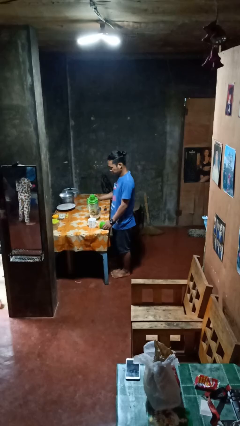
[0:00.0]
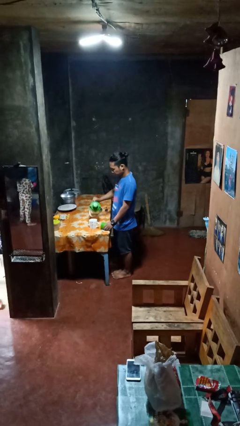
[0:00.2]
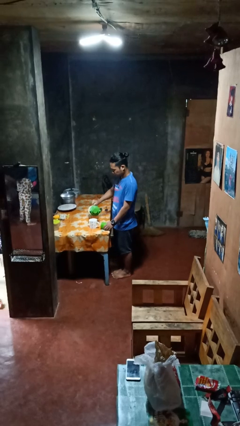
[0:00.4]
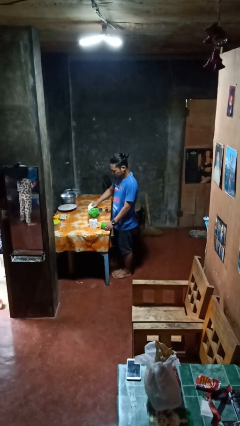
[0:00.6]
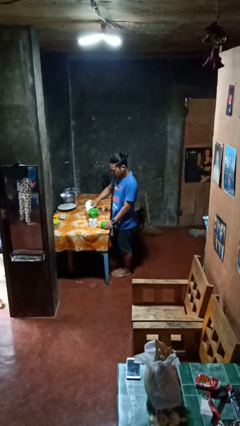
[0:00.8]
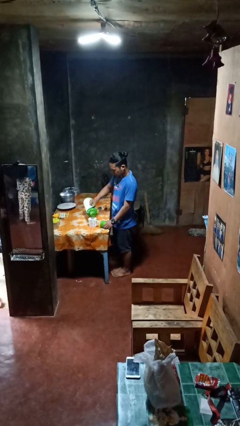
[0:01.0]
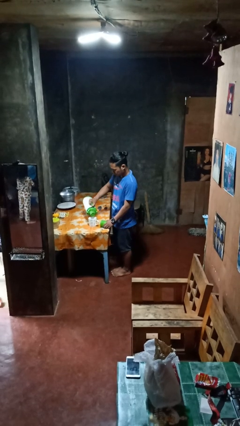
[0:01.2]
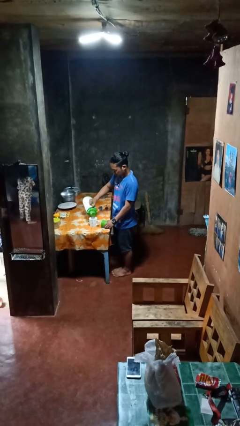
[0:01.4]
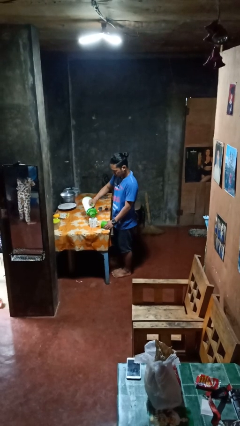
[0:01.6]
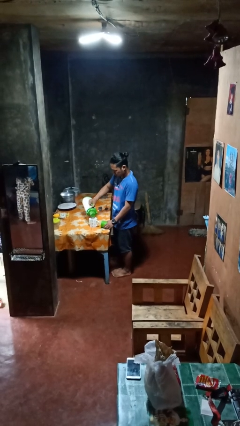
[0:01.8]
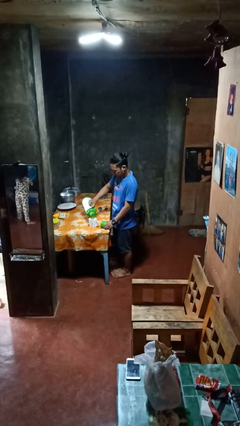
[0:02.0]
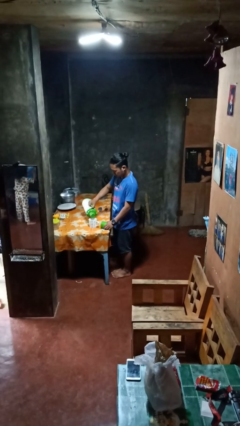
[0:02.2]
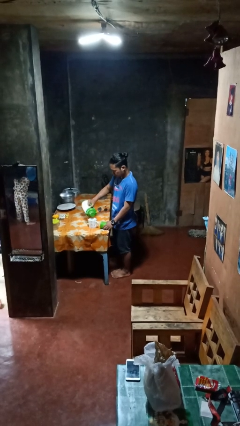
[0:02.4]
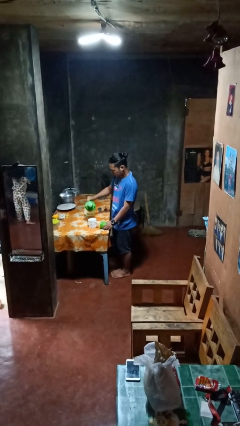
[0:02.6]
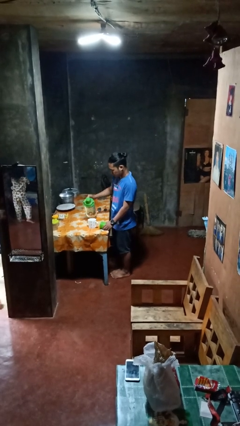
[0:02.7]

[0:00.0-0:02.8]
person pours coffee into mug

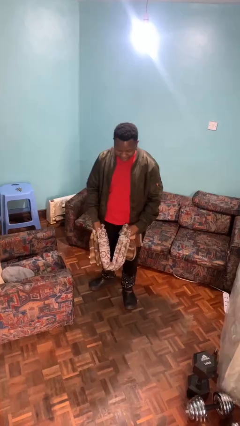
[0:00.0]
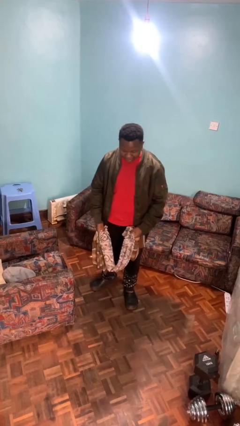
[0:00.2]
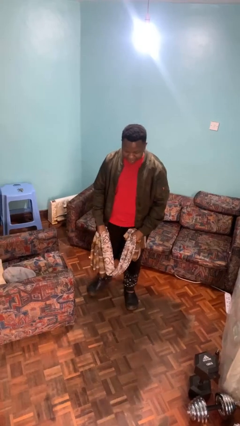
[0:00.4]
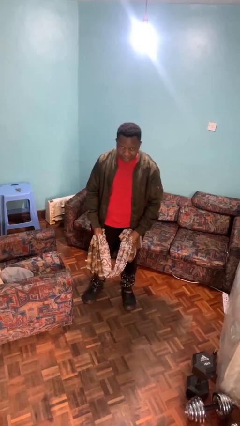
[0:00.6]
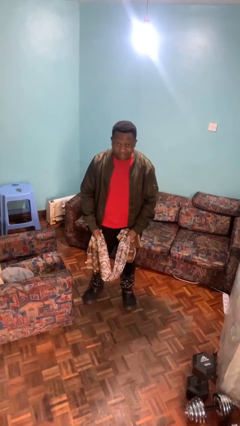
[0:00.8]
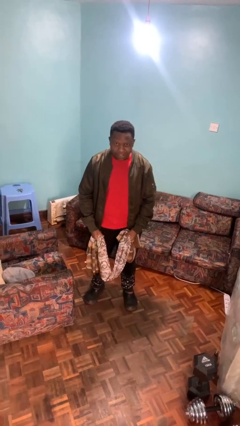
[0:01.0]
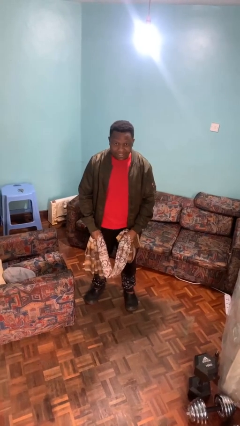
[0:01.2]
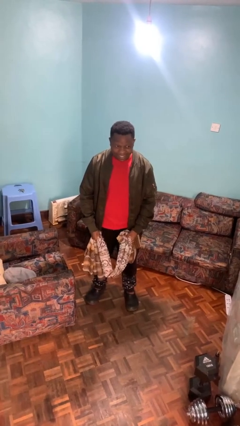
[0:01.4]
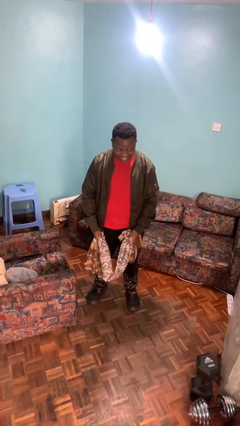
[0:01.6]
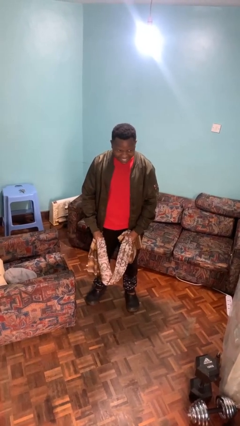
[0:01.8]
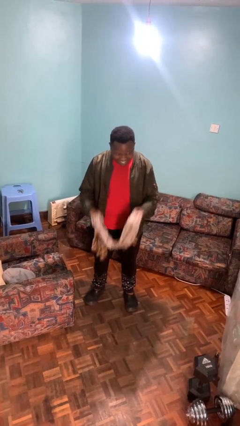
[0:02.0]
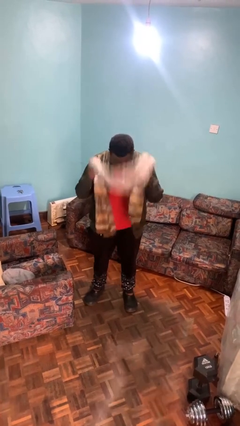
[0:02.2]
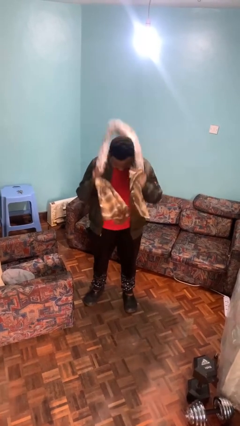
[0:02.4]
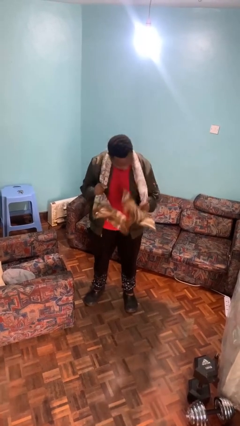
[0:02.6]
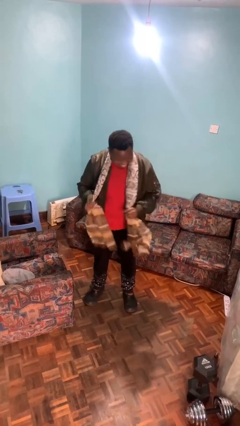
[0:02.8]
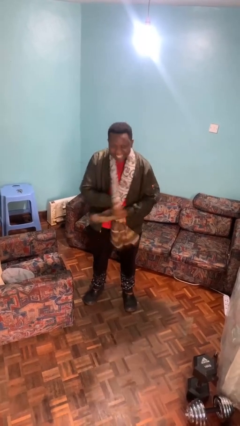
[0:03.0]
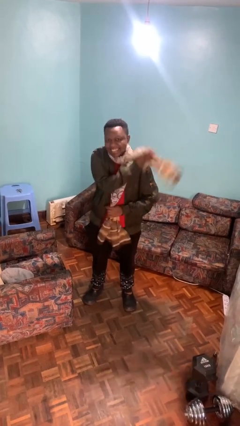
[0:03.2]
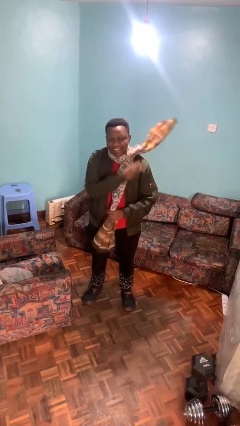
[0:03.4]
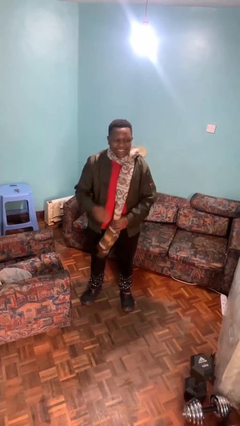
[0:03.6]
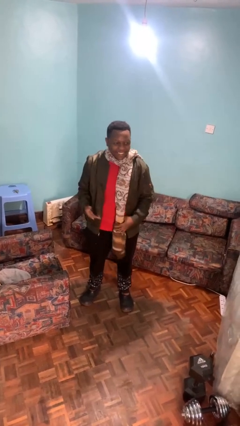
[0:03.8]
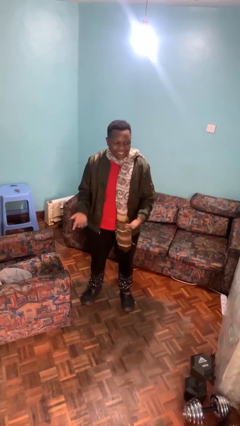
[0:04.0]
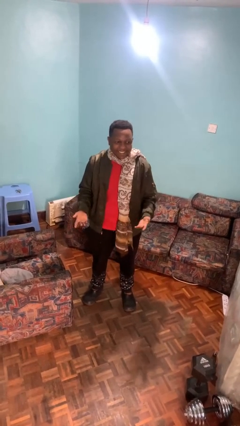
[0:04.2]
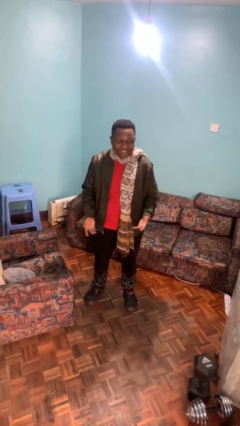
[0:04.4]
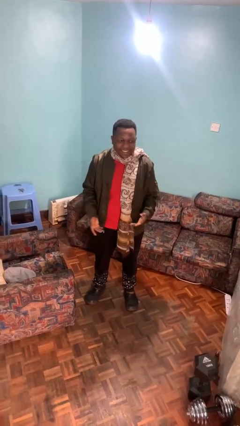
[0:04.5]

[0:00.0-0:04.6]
person puts on scarf

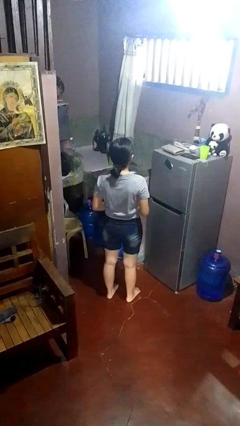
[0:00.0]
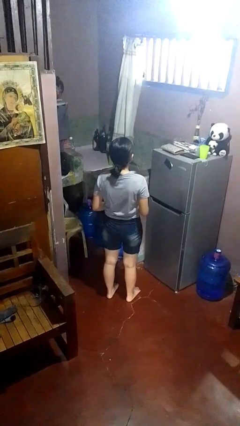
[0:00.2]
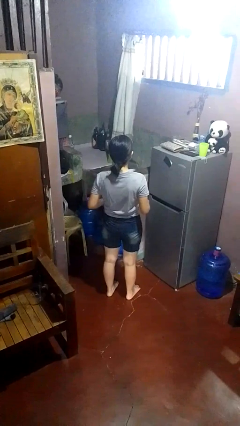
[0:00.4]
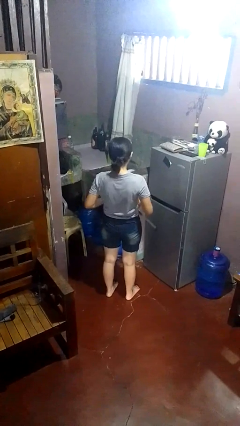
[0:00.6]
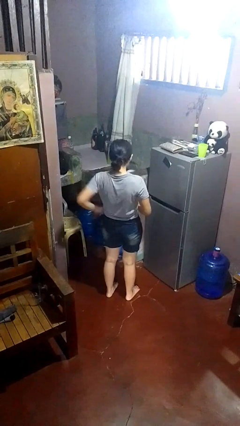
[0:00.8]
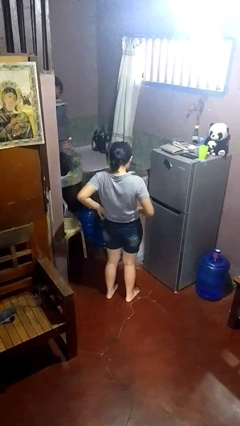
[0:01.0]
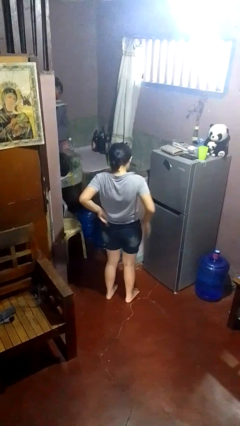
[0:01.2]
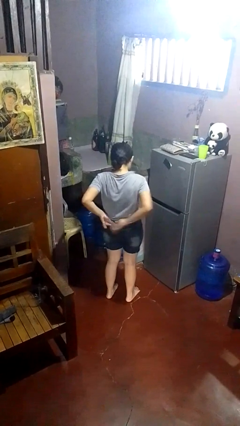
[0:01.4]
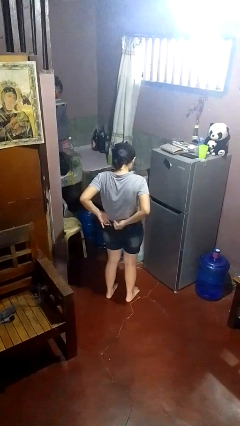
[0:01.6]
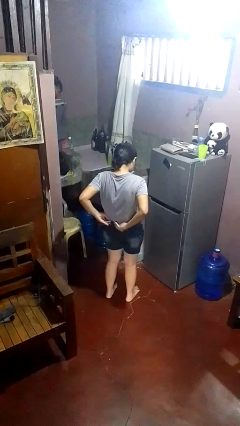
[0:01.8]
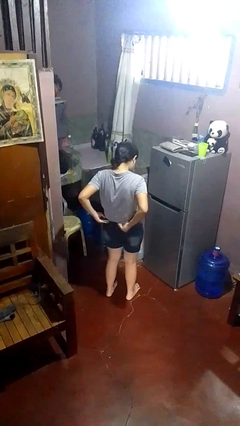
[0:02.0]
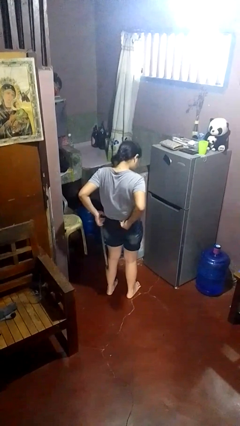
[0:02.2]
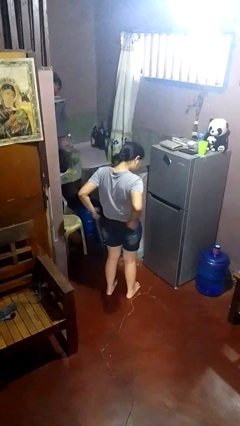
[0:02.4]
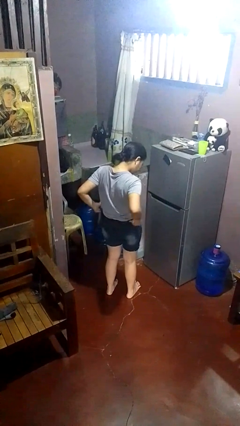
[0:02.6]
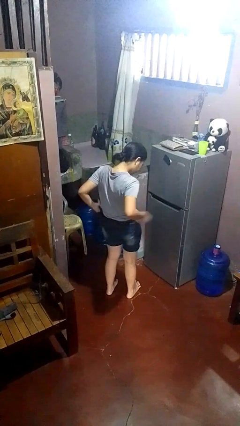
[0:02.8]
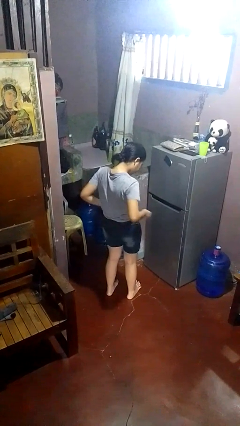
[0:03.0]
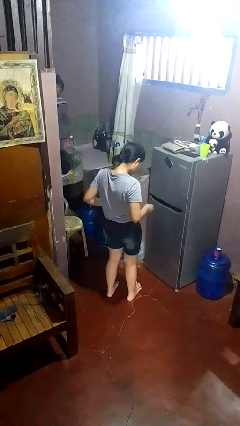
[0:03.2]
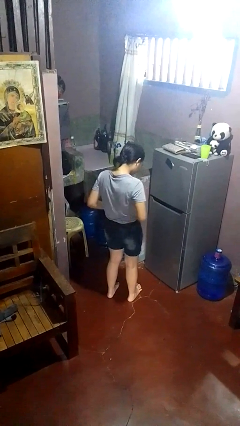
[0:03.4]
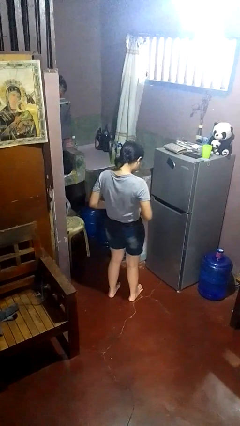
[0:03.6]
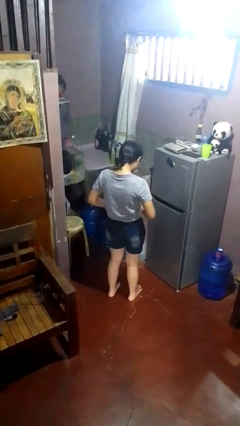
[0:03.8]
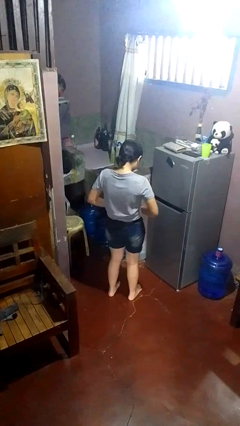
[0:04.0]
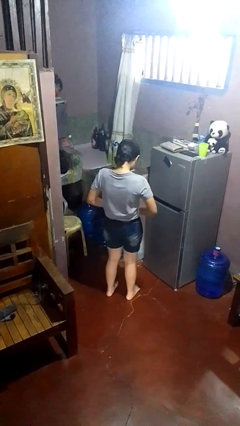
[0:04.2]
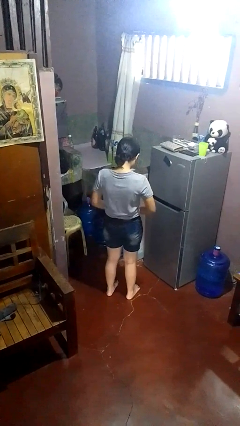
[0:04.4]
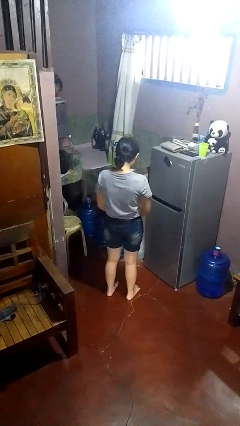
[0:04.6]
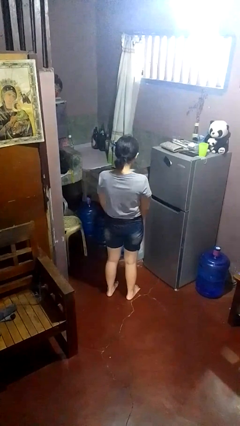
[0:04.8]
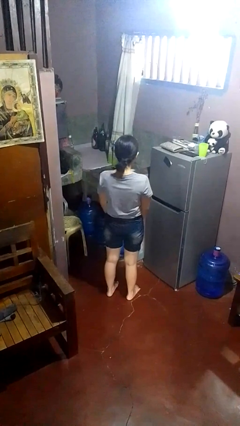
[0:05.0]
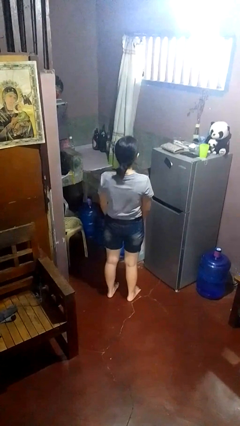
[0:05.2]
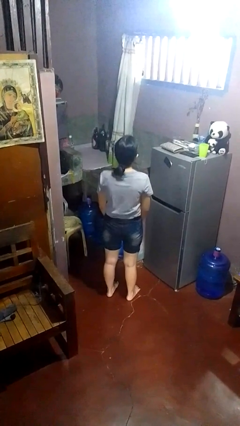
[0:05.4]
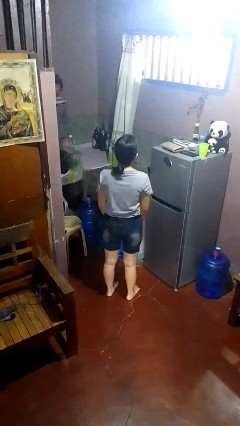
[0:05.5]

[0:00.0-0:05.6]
person puts on belt

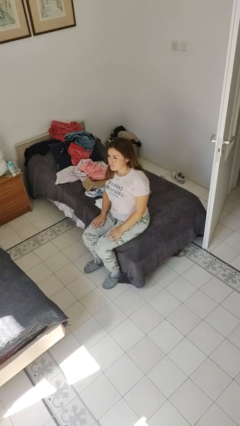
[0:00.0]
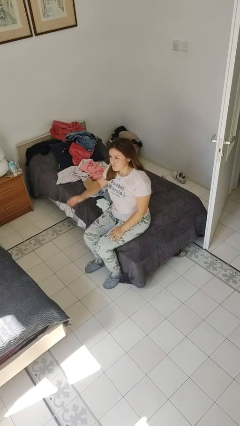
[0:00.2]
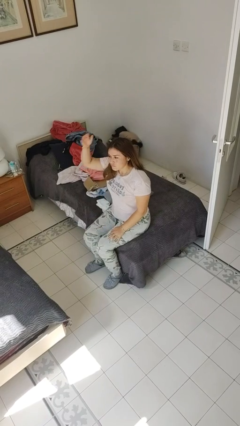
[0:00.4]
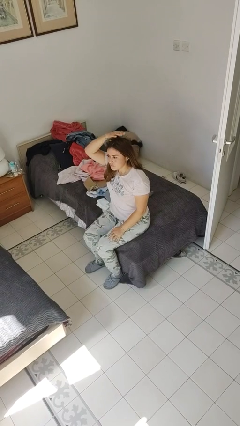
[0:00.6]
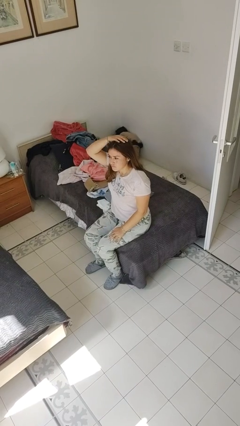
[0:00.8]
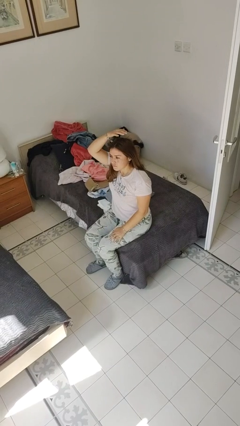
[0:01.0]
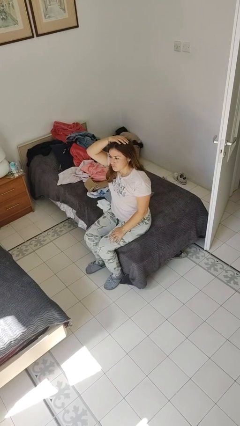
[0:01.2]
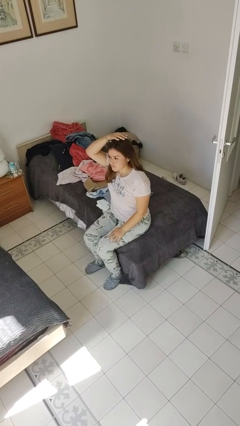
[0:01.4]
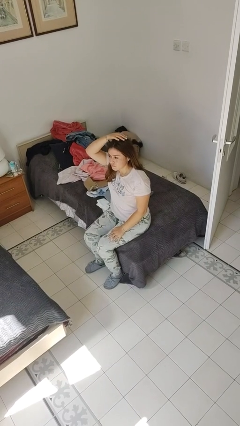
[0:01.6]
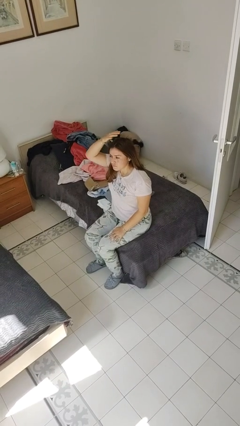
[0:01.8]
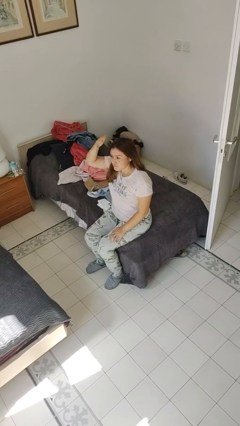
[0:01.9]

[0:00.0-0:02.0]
person pats head

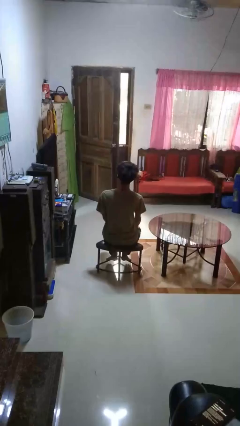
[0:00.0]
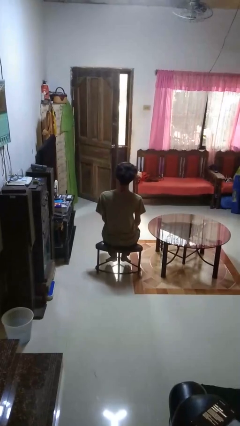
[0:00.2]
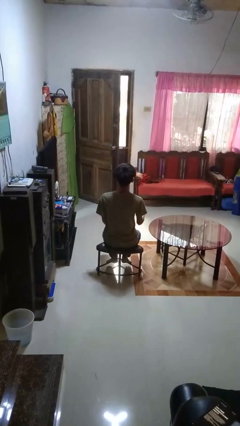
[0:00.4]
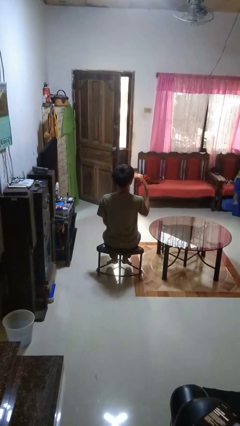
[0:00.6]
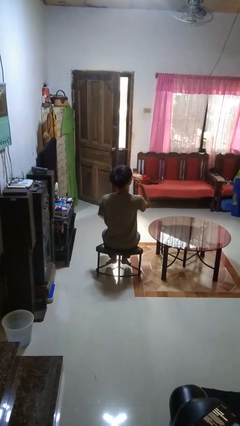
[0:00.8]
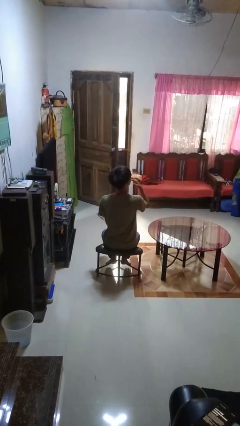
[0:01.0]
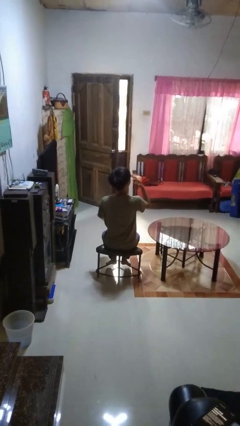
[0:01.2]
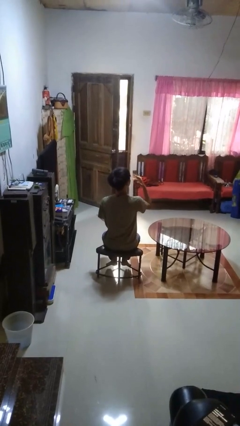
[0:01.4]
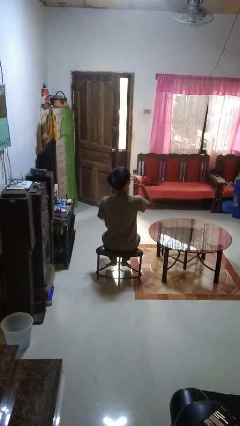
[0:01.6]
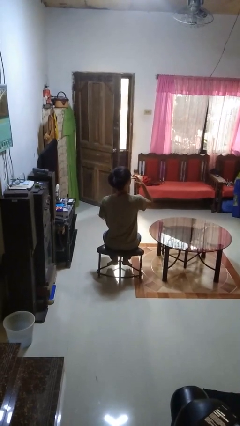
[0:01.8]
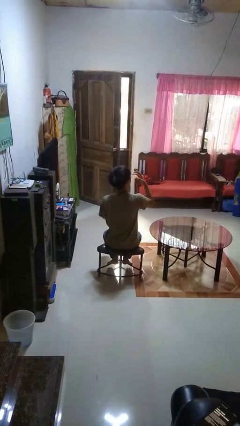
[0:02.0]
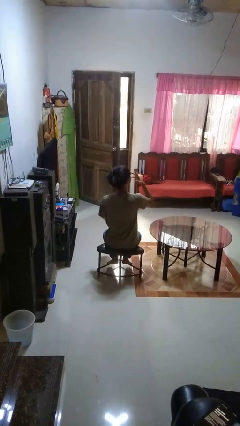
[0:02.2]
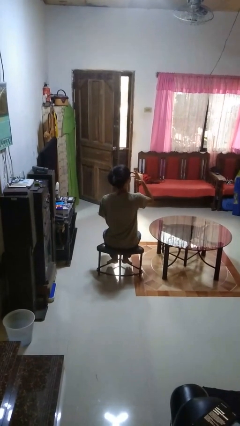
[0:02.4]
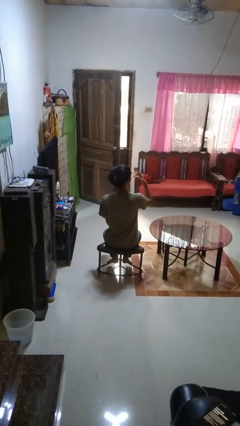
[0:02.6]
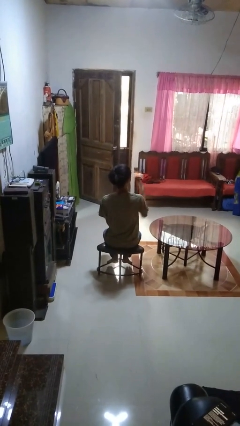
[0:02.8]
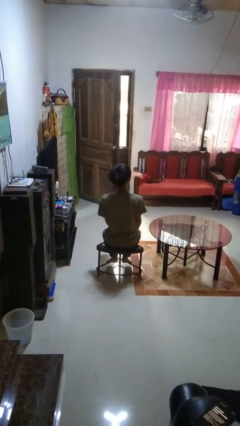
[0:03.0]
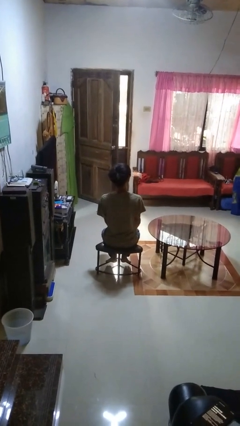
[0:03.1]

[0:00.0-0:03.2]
person licks fingers
